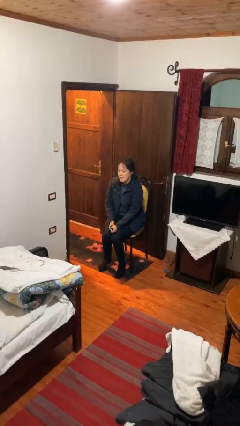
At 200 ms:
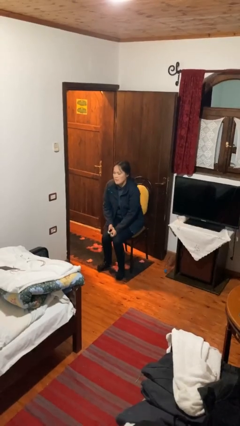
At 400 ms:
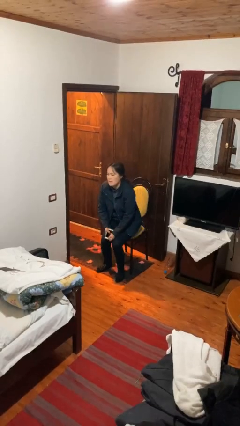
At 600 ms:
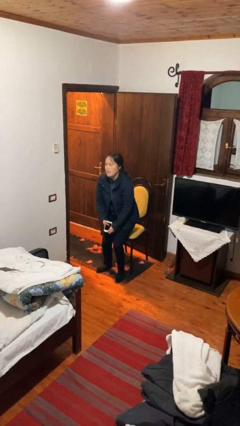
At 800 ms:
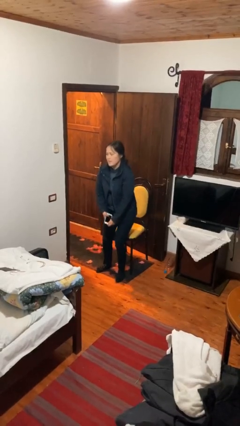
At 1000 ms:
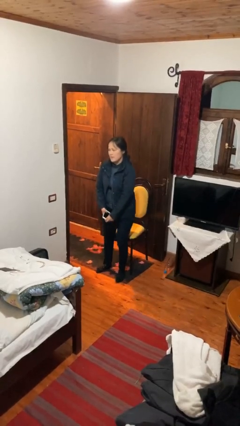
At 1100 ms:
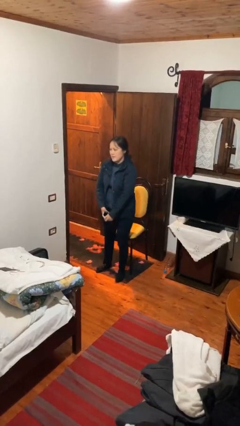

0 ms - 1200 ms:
person stands up

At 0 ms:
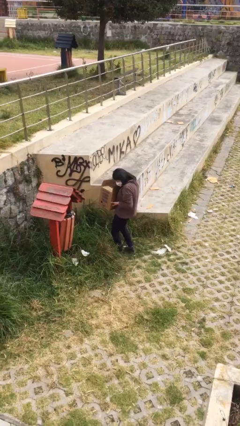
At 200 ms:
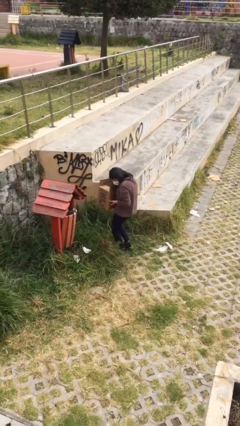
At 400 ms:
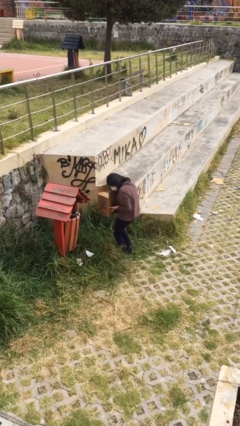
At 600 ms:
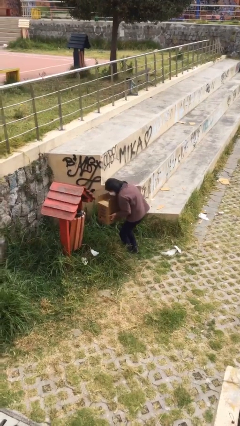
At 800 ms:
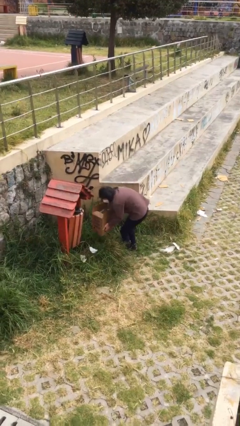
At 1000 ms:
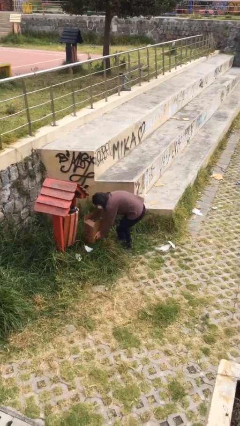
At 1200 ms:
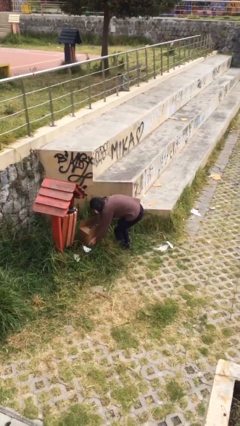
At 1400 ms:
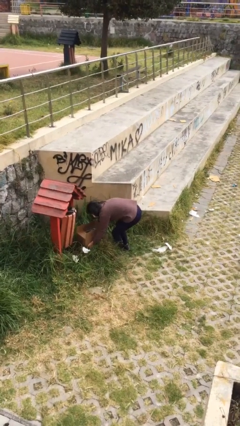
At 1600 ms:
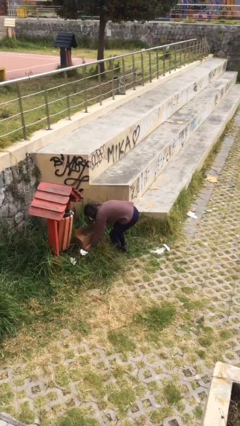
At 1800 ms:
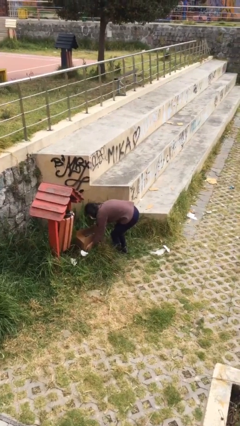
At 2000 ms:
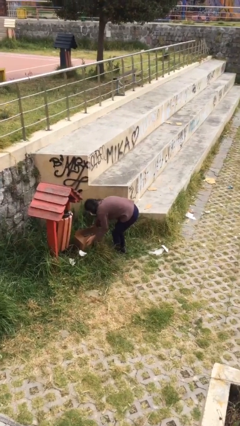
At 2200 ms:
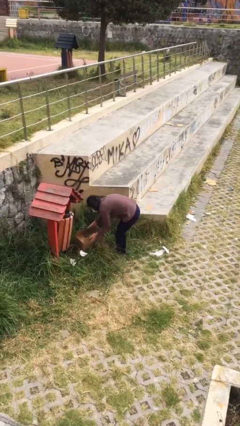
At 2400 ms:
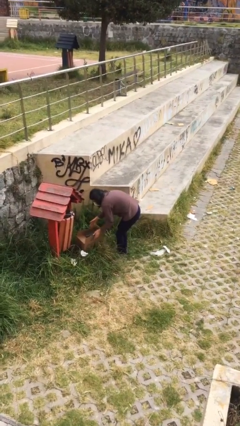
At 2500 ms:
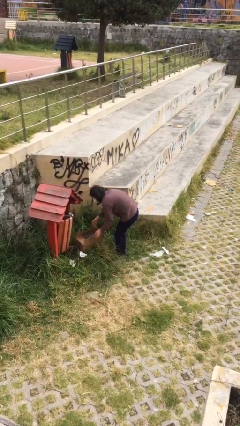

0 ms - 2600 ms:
person puts down object on floor

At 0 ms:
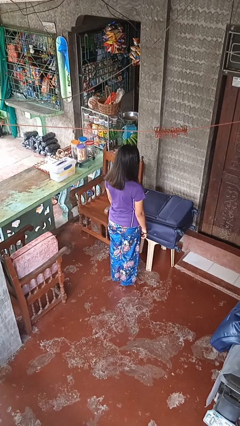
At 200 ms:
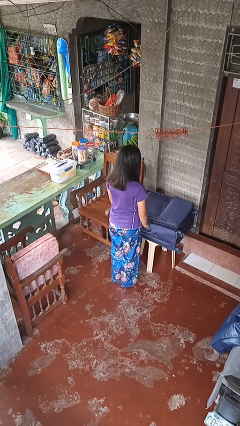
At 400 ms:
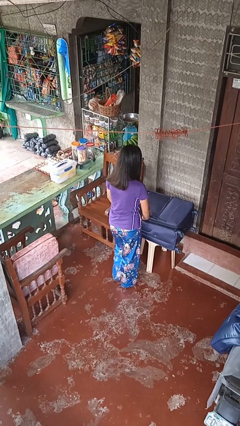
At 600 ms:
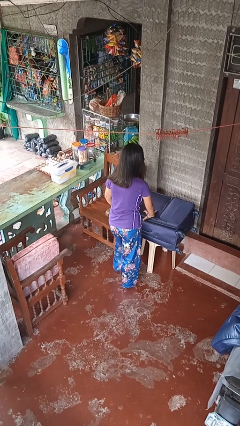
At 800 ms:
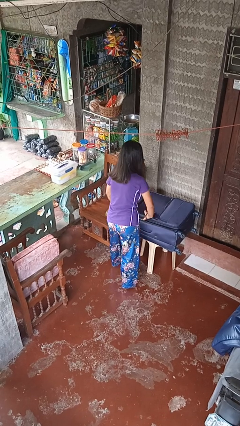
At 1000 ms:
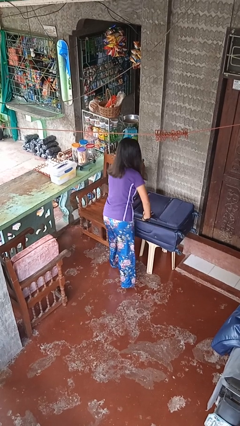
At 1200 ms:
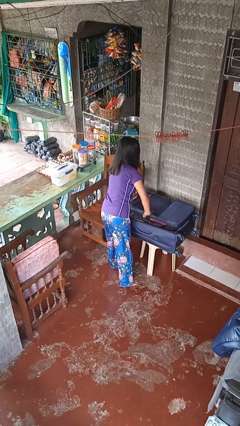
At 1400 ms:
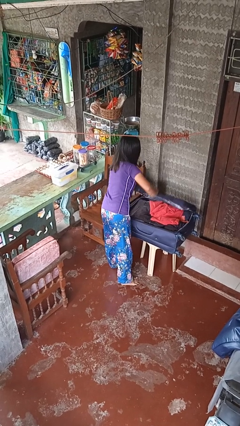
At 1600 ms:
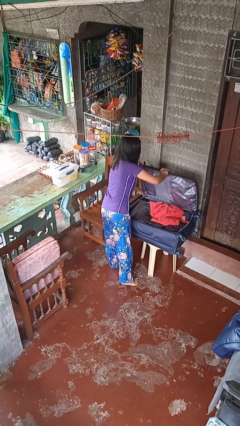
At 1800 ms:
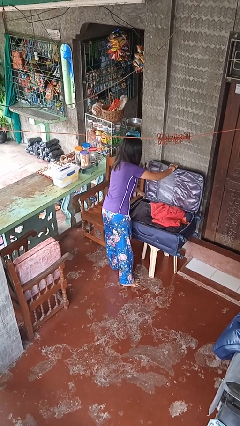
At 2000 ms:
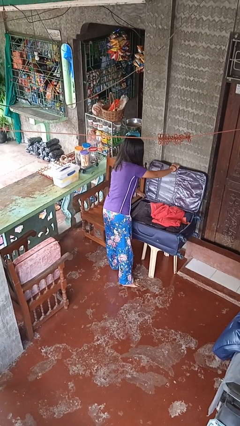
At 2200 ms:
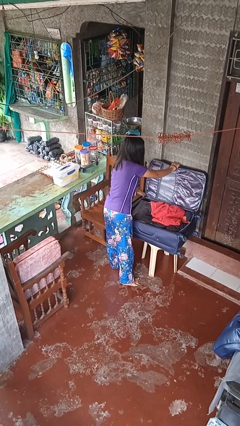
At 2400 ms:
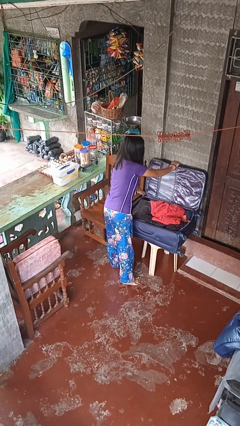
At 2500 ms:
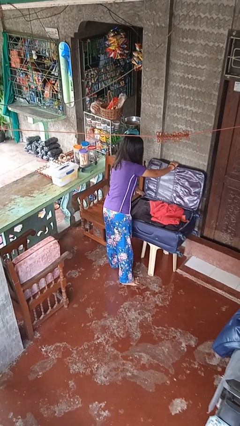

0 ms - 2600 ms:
person opens suitcase

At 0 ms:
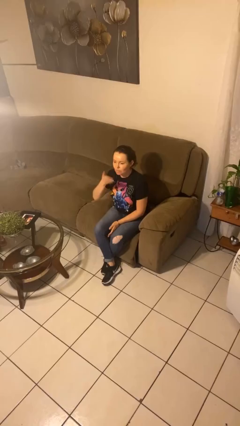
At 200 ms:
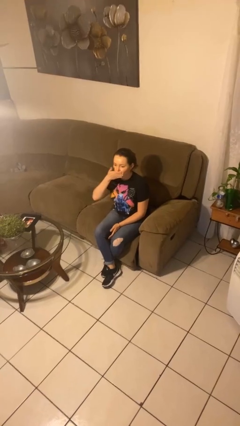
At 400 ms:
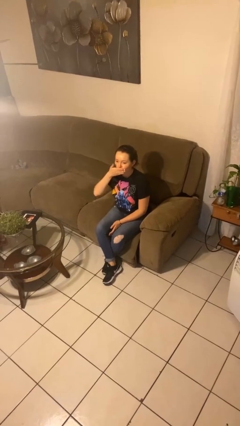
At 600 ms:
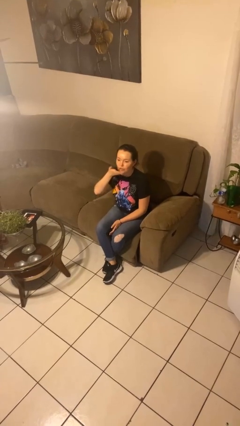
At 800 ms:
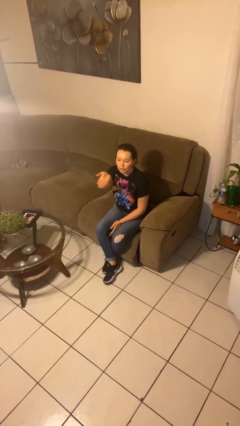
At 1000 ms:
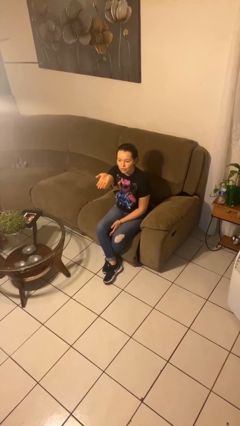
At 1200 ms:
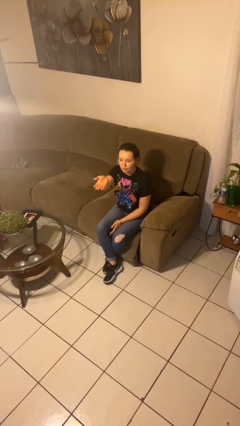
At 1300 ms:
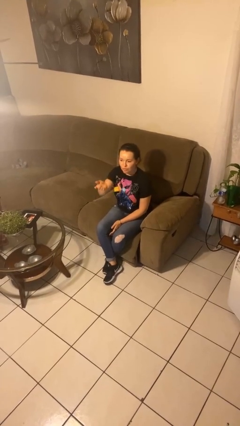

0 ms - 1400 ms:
person gestures blow kiss

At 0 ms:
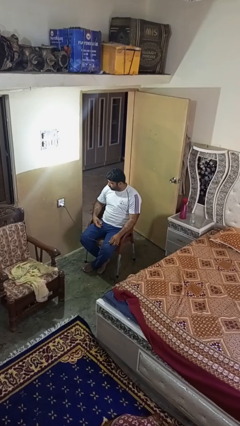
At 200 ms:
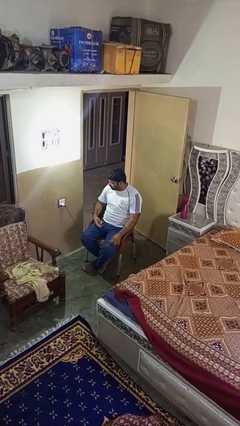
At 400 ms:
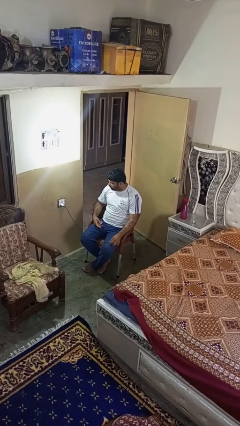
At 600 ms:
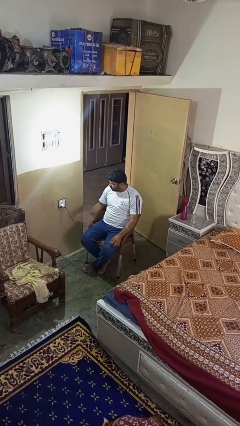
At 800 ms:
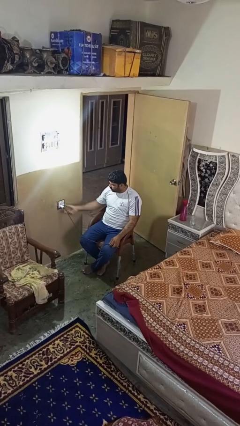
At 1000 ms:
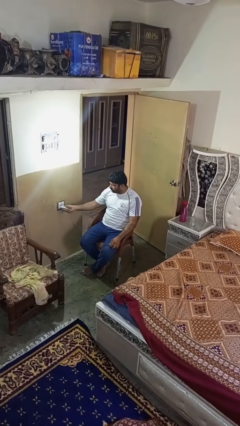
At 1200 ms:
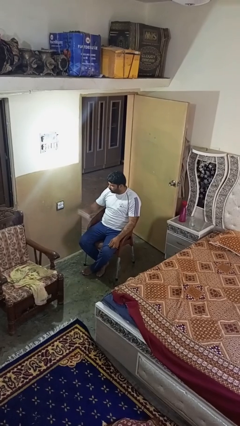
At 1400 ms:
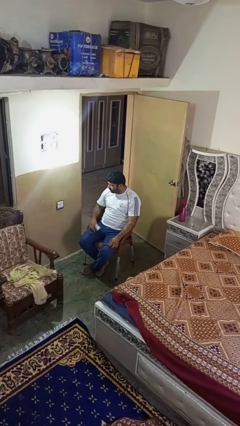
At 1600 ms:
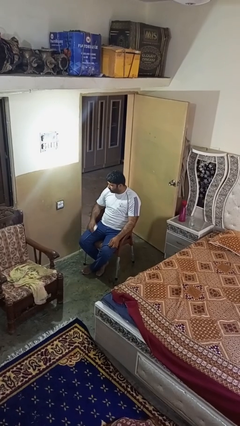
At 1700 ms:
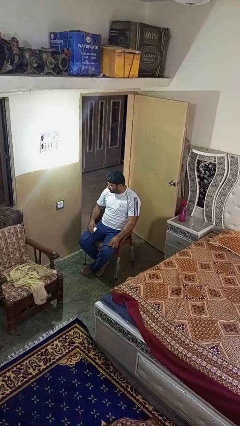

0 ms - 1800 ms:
person unplugs from electrical socket

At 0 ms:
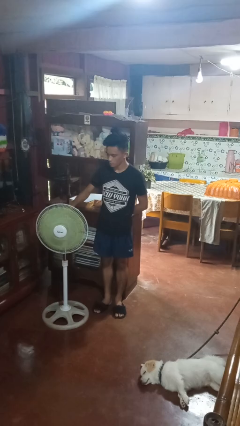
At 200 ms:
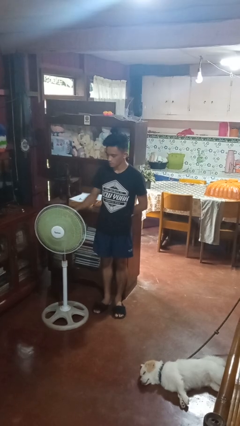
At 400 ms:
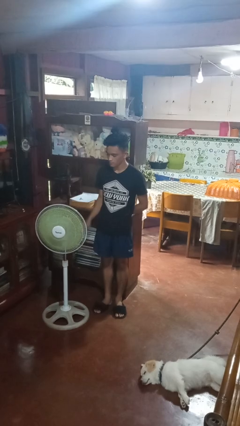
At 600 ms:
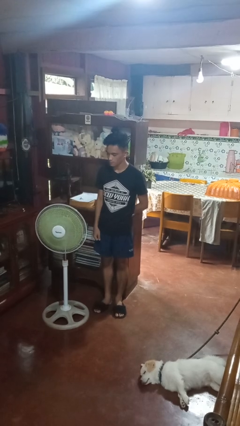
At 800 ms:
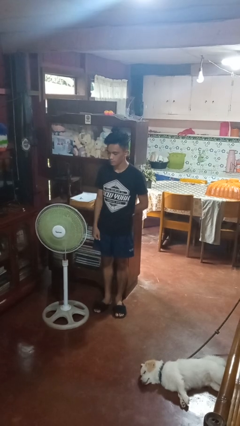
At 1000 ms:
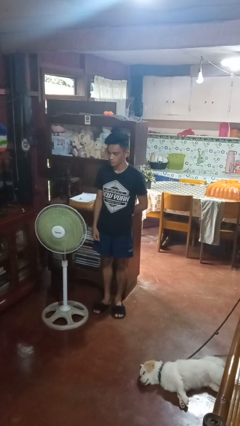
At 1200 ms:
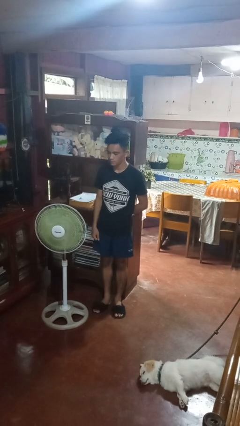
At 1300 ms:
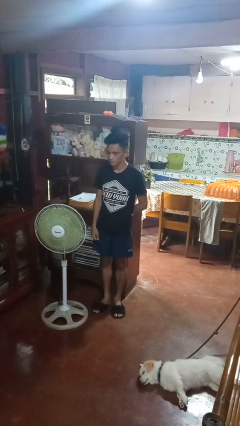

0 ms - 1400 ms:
person turns off fan

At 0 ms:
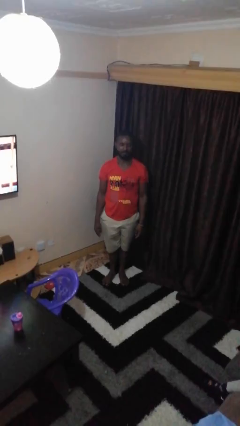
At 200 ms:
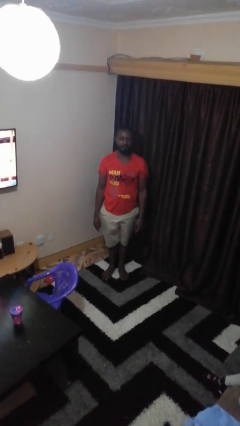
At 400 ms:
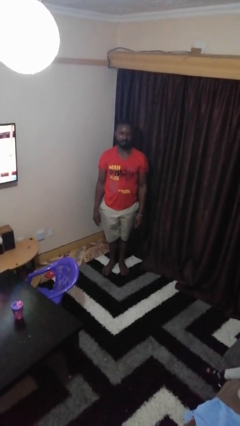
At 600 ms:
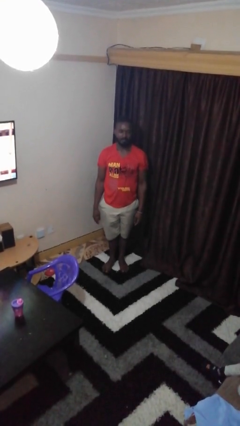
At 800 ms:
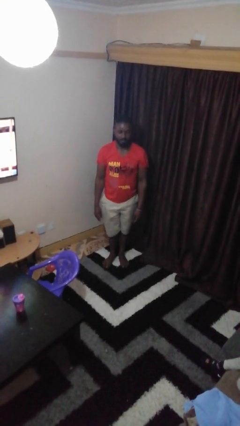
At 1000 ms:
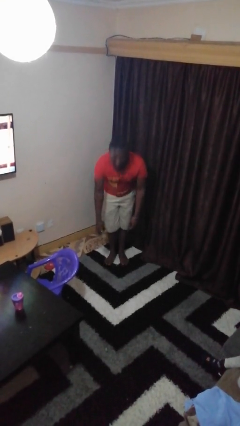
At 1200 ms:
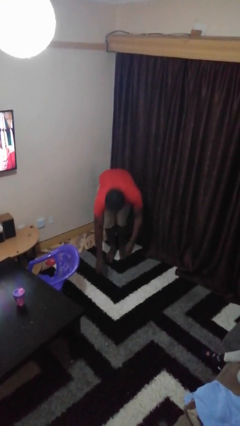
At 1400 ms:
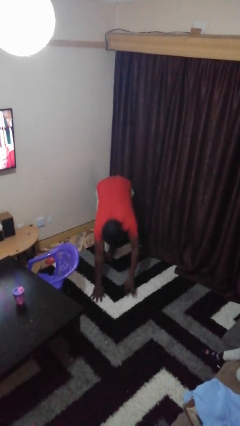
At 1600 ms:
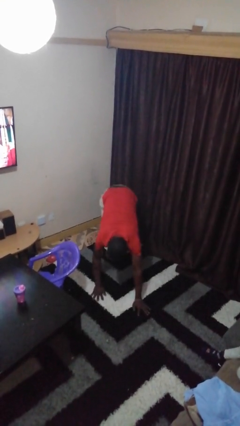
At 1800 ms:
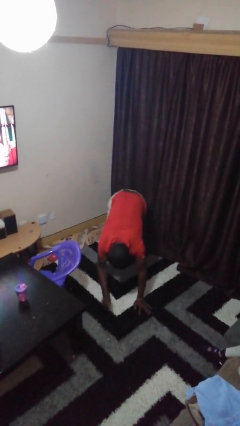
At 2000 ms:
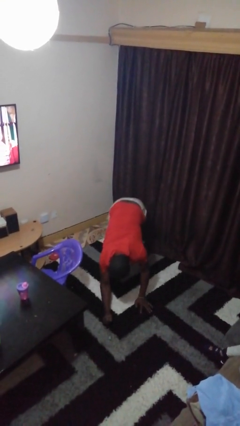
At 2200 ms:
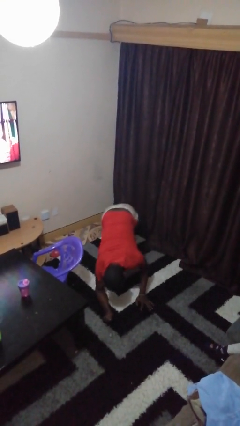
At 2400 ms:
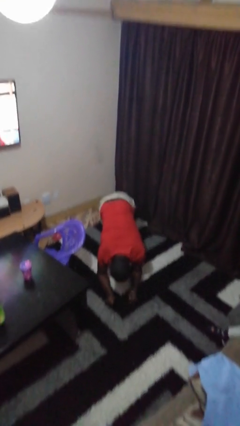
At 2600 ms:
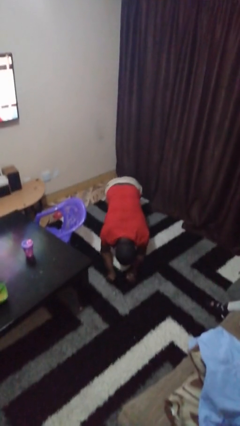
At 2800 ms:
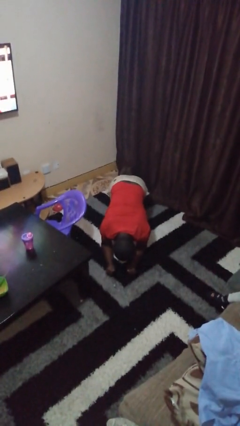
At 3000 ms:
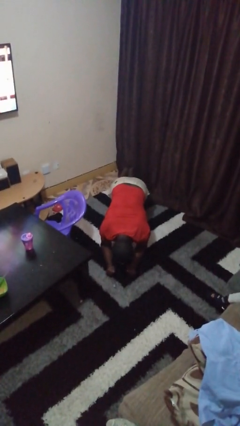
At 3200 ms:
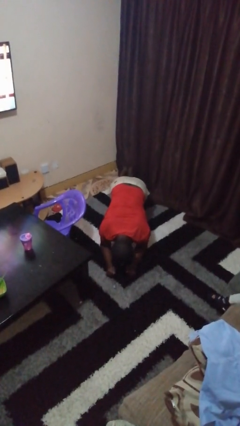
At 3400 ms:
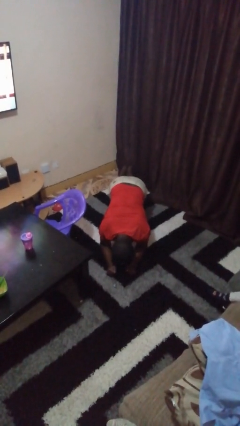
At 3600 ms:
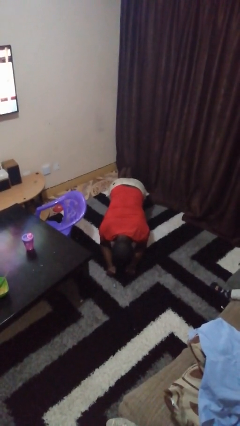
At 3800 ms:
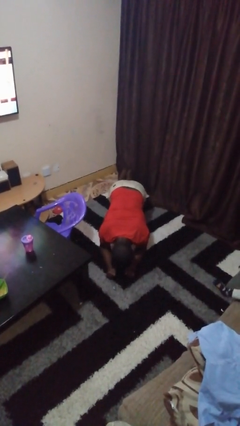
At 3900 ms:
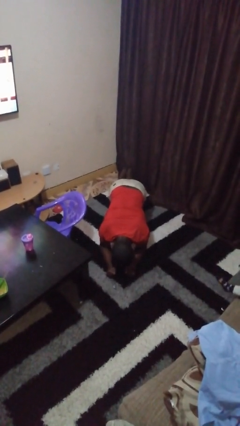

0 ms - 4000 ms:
person exercises with plank

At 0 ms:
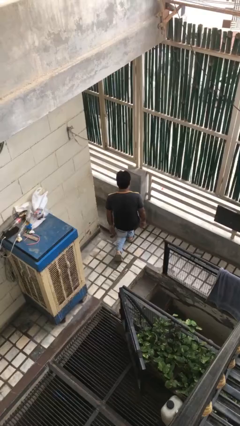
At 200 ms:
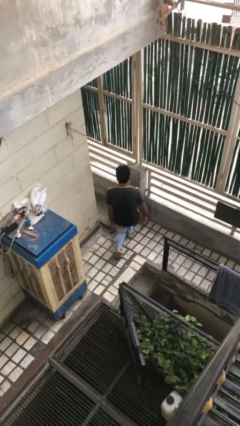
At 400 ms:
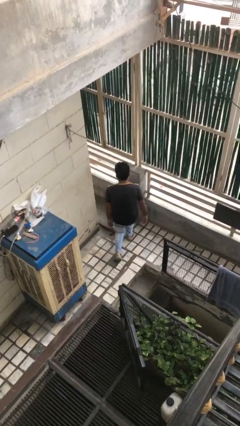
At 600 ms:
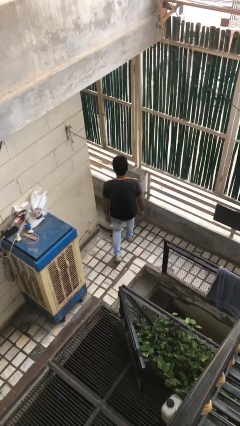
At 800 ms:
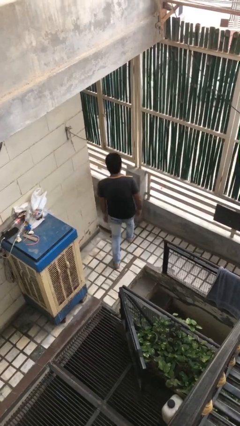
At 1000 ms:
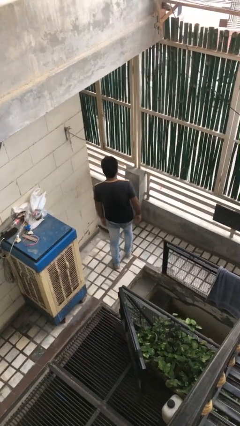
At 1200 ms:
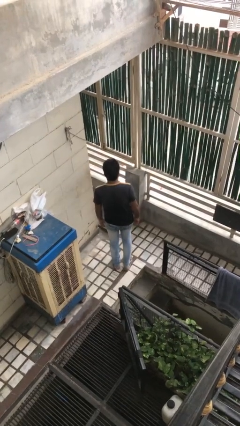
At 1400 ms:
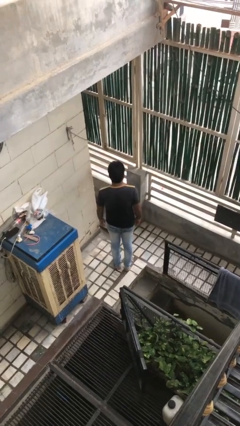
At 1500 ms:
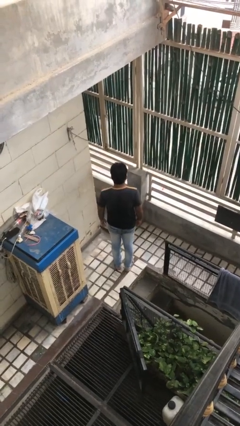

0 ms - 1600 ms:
person stands up from floor
